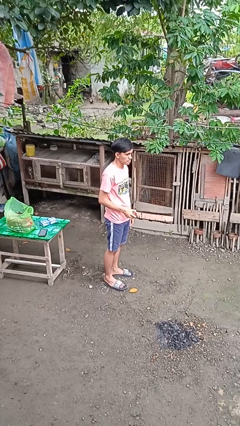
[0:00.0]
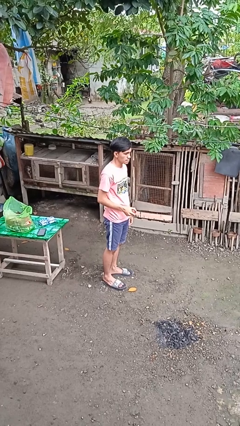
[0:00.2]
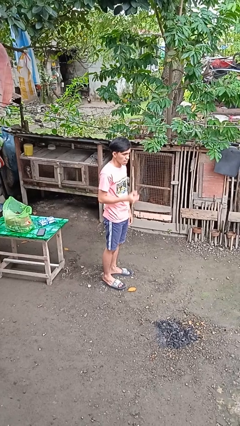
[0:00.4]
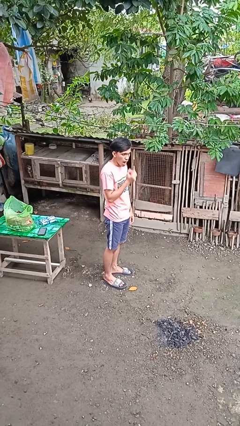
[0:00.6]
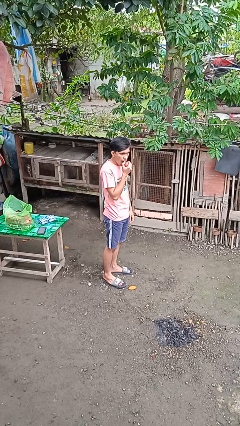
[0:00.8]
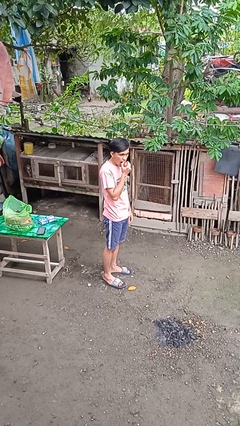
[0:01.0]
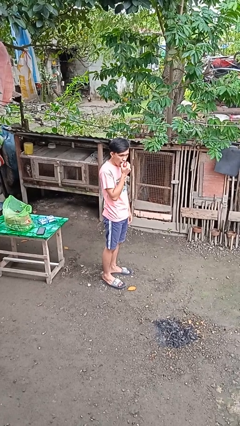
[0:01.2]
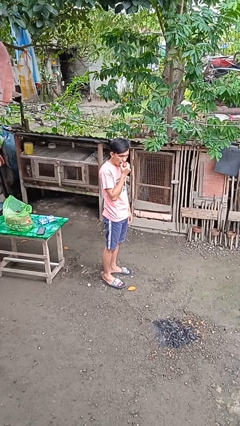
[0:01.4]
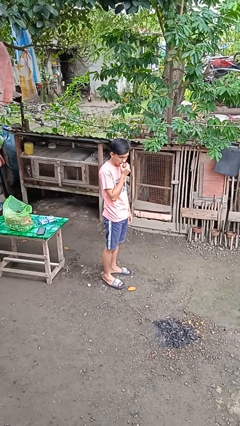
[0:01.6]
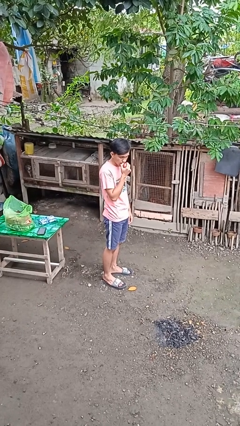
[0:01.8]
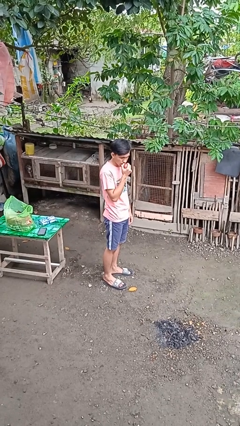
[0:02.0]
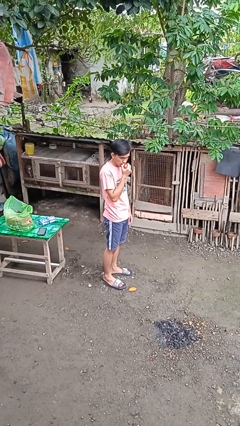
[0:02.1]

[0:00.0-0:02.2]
person eats apple

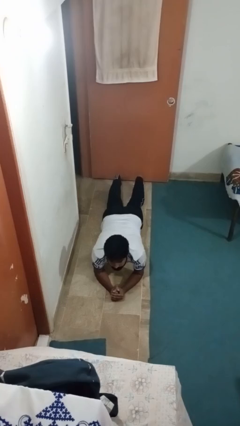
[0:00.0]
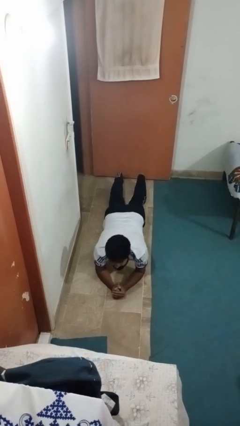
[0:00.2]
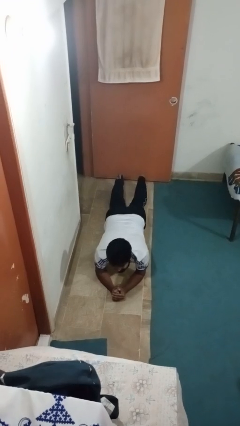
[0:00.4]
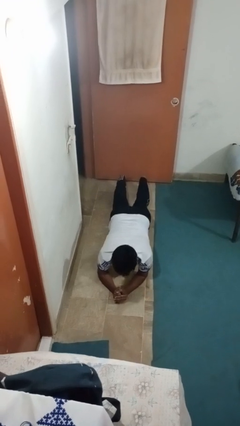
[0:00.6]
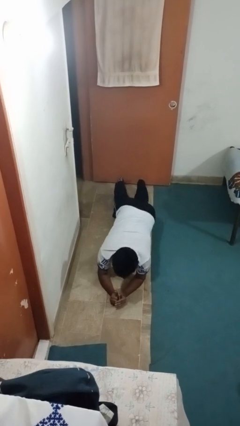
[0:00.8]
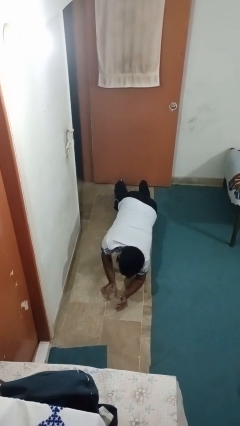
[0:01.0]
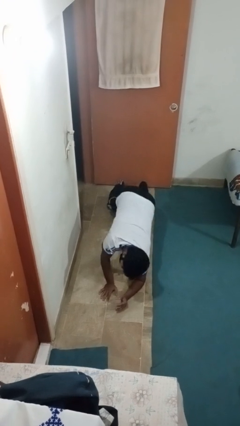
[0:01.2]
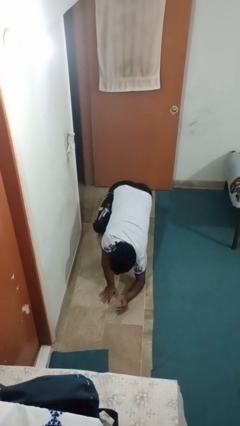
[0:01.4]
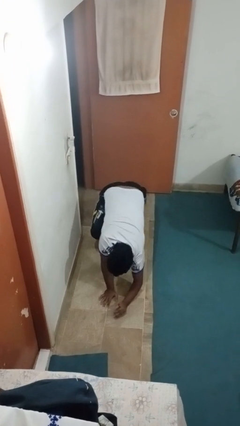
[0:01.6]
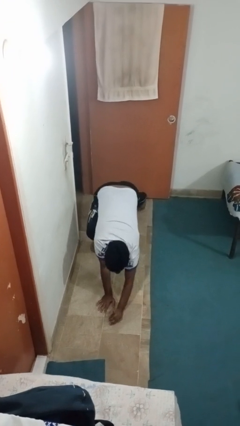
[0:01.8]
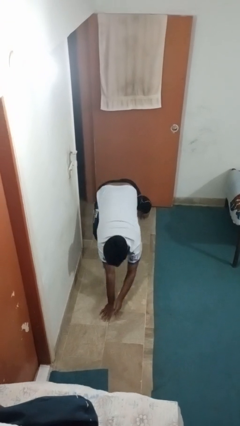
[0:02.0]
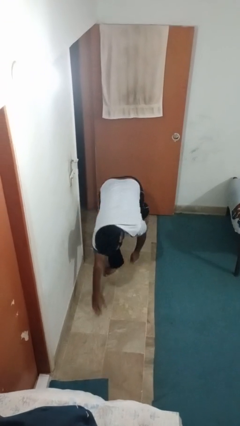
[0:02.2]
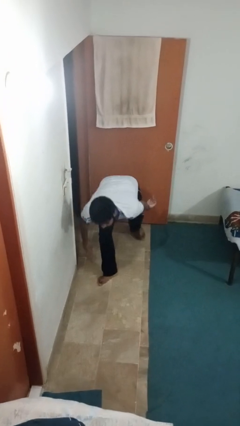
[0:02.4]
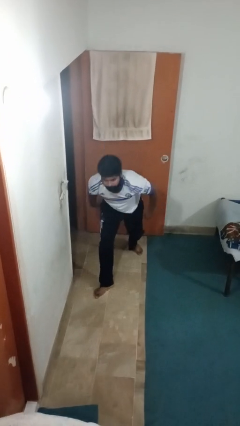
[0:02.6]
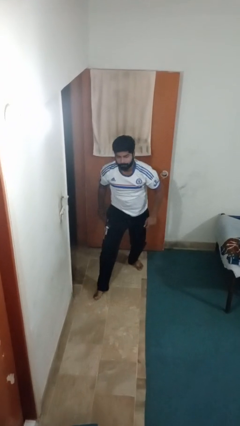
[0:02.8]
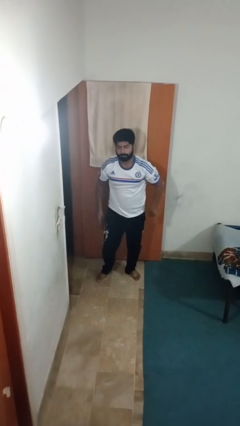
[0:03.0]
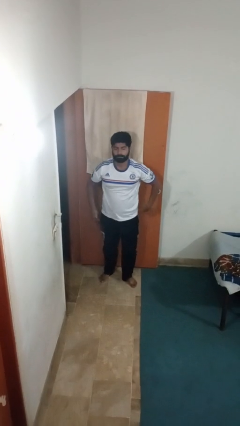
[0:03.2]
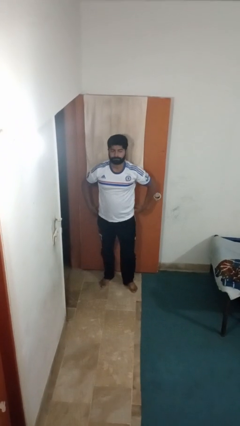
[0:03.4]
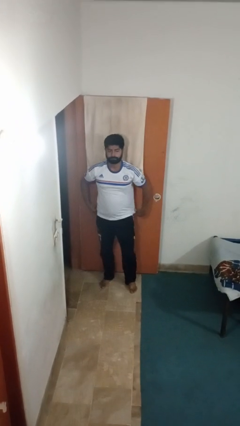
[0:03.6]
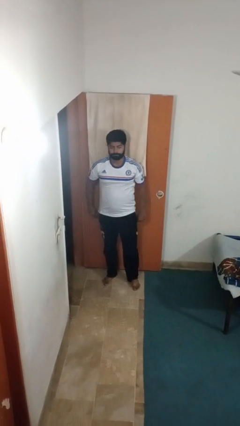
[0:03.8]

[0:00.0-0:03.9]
person stands up from floor

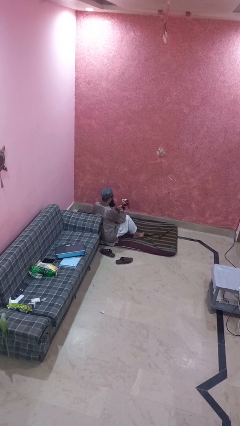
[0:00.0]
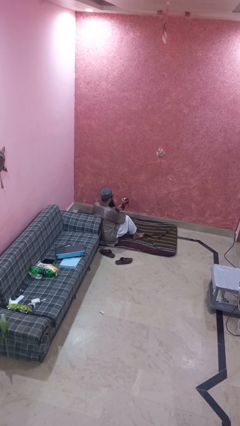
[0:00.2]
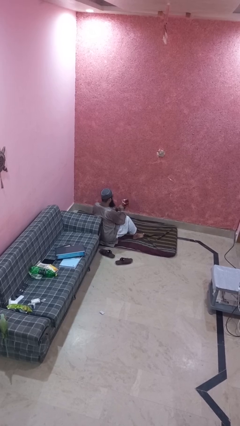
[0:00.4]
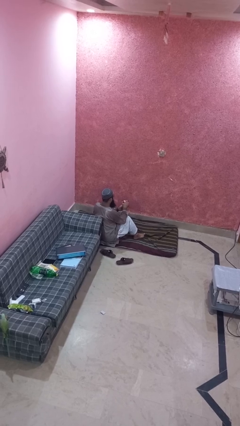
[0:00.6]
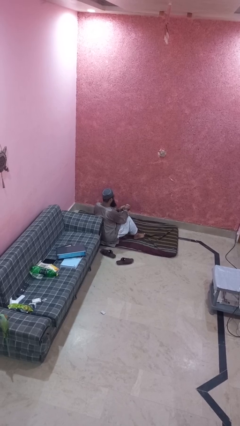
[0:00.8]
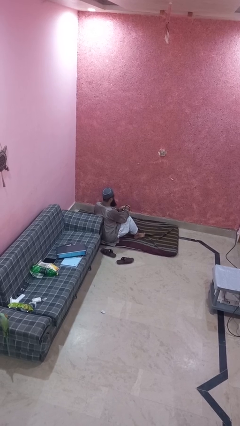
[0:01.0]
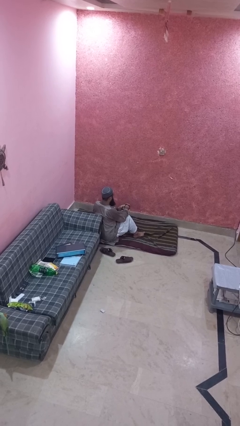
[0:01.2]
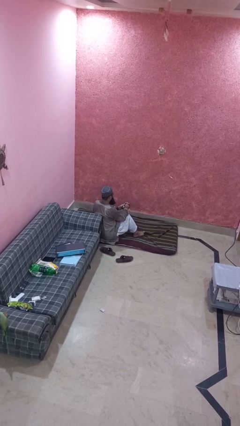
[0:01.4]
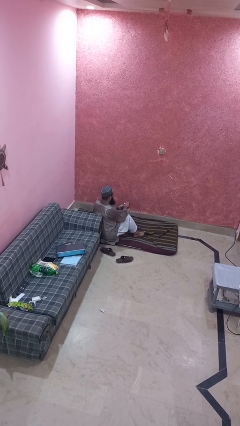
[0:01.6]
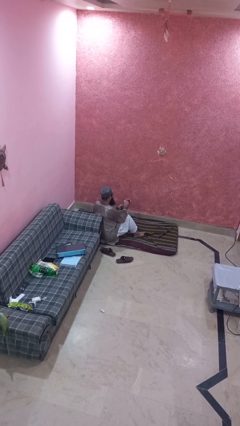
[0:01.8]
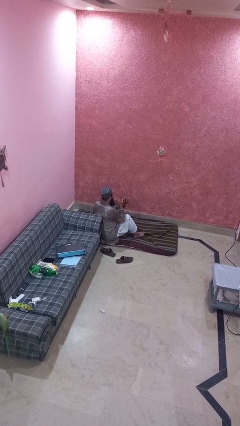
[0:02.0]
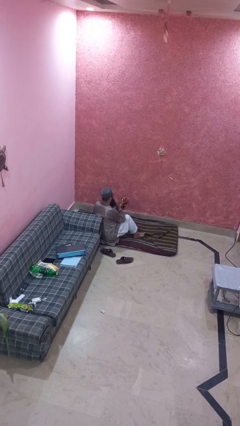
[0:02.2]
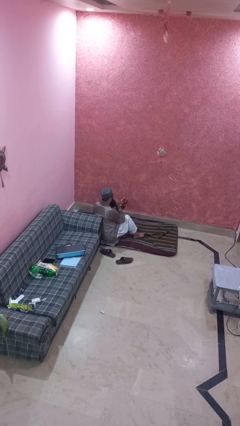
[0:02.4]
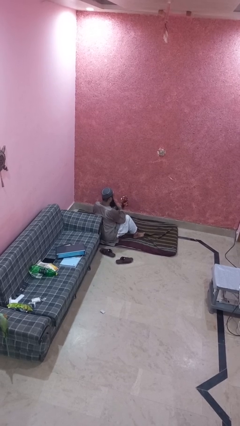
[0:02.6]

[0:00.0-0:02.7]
person eats snack from bag

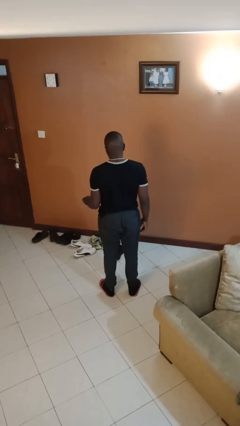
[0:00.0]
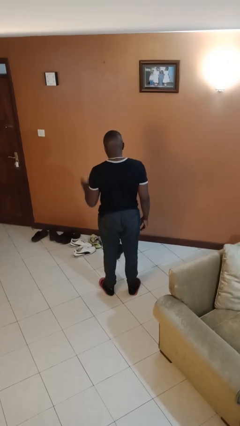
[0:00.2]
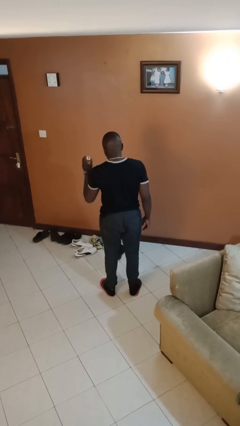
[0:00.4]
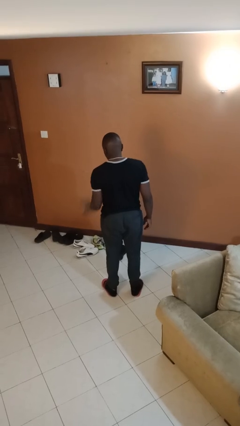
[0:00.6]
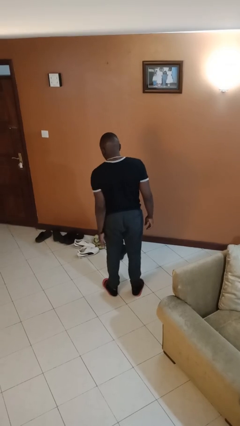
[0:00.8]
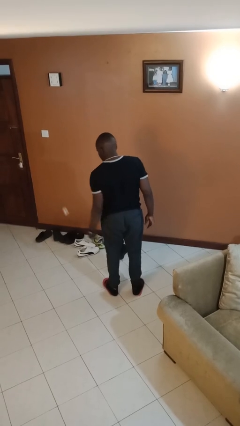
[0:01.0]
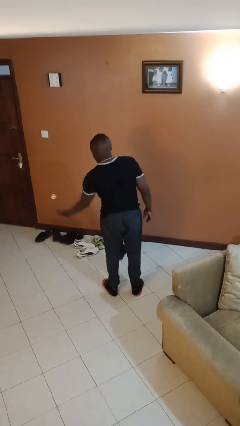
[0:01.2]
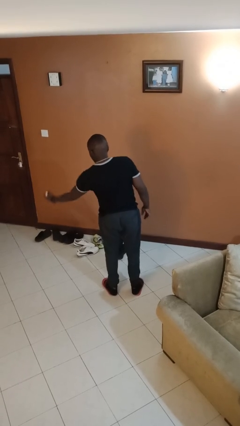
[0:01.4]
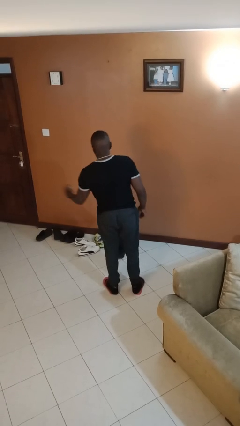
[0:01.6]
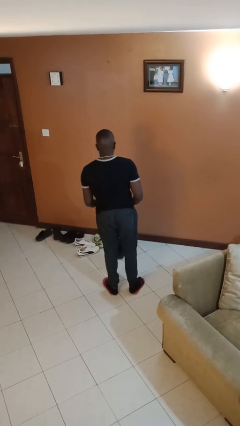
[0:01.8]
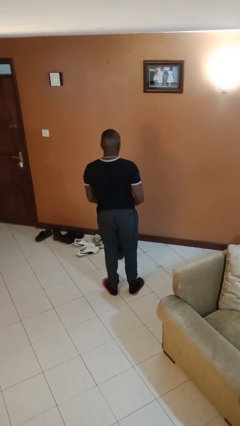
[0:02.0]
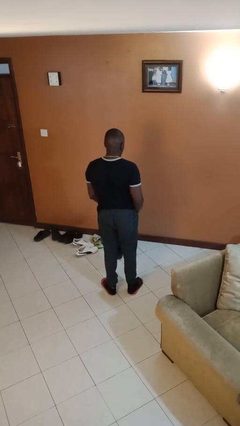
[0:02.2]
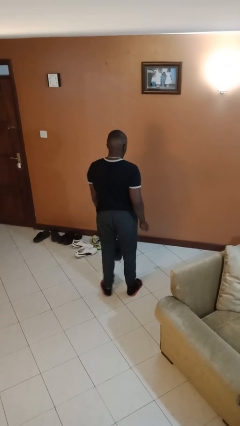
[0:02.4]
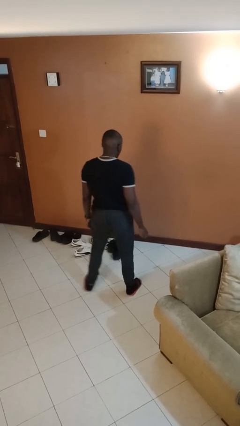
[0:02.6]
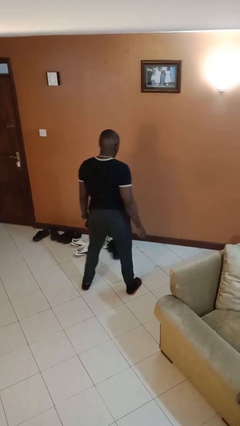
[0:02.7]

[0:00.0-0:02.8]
person bounces ball on floor

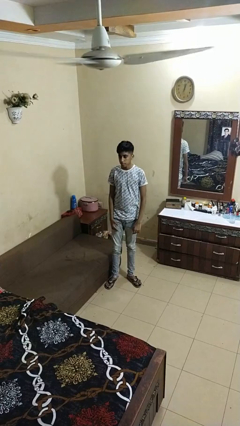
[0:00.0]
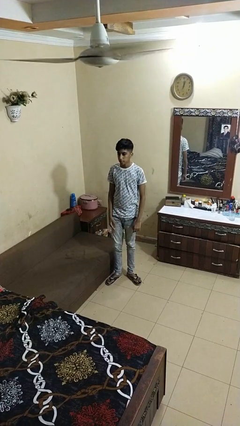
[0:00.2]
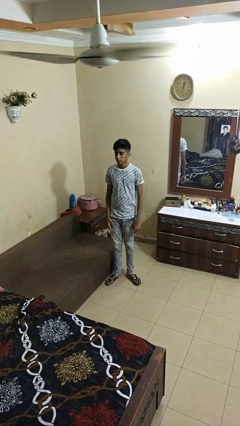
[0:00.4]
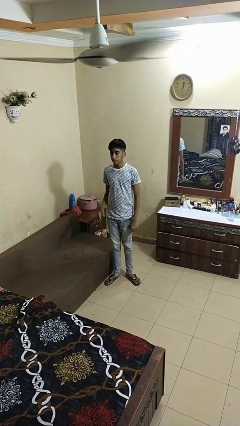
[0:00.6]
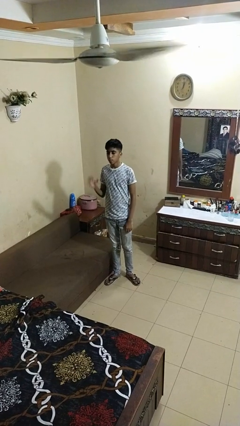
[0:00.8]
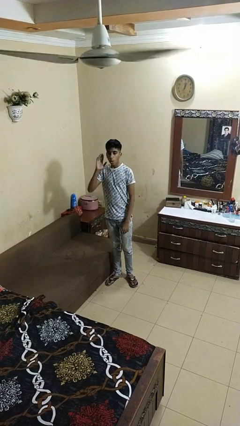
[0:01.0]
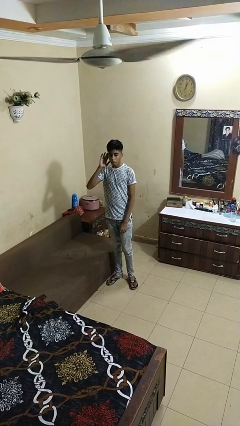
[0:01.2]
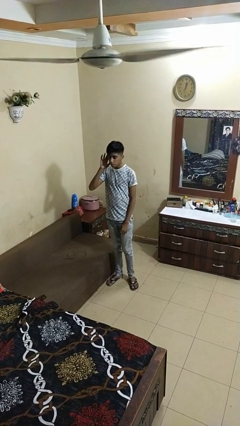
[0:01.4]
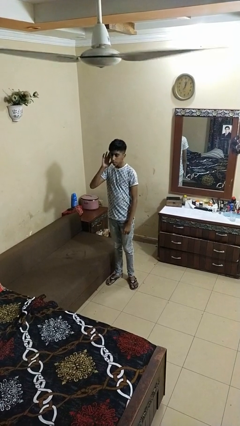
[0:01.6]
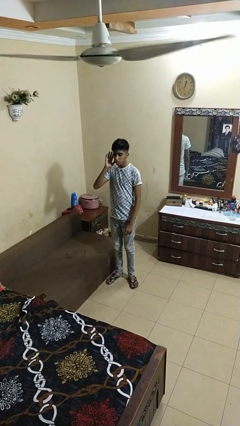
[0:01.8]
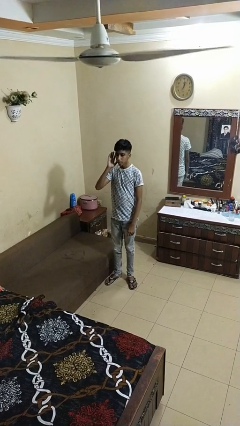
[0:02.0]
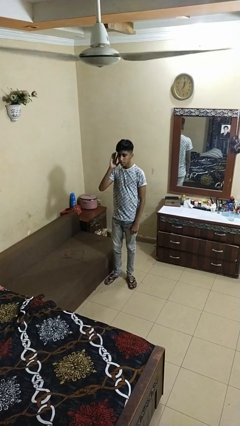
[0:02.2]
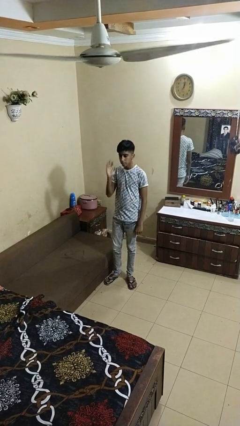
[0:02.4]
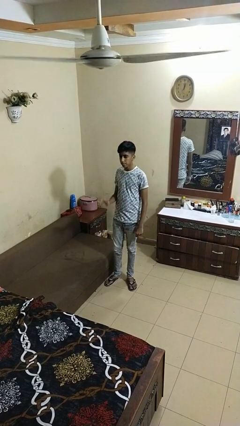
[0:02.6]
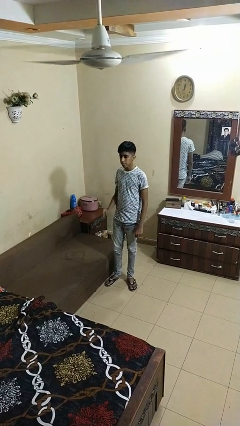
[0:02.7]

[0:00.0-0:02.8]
person gestures listen closely

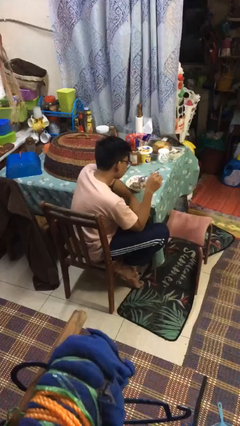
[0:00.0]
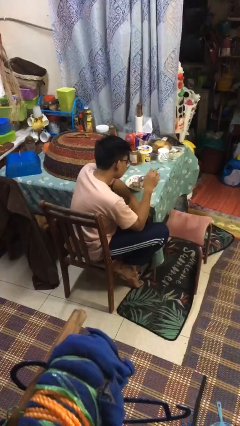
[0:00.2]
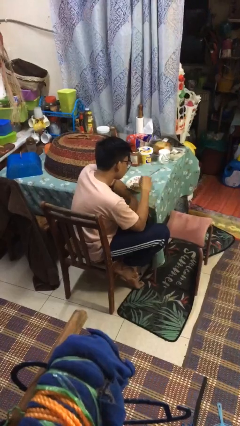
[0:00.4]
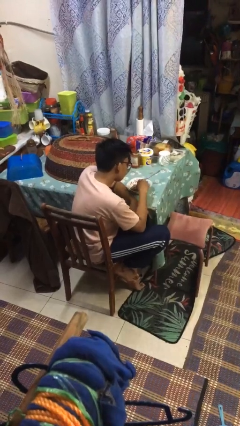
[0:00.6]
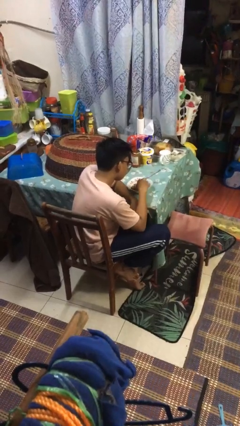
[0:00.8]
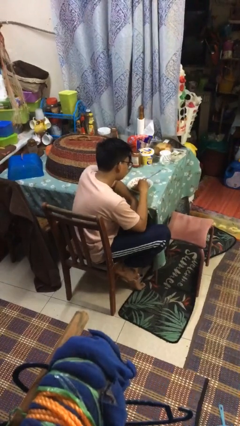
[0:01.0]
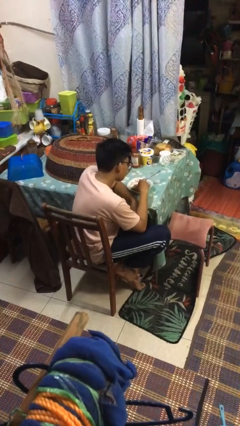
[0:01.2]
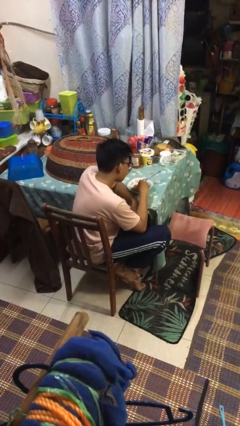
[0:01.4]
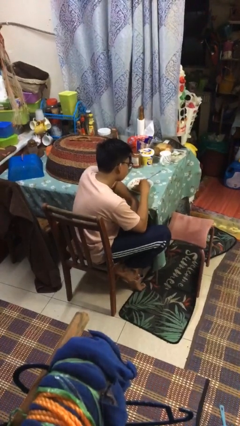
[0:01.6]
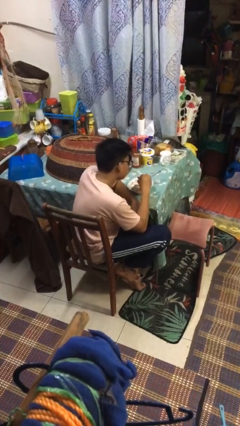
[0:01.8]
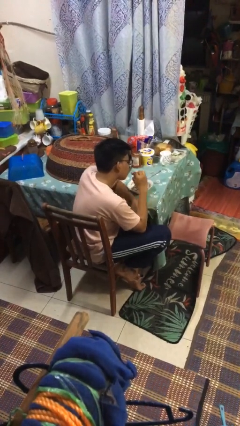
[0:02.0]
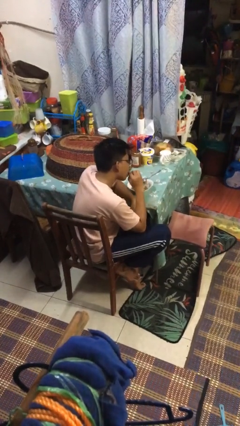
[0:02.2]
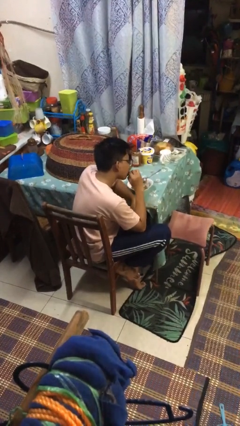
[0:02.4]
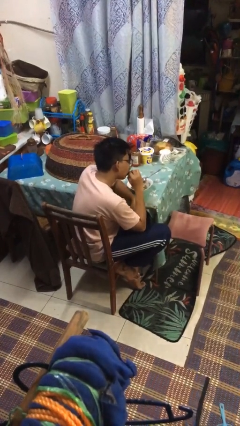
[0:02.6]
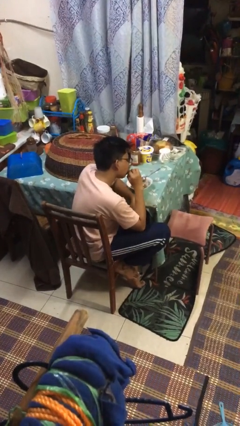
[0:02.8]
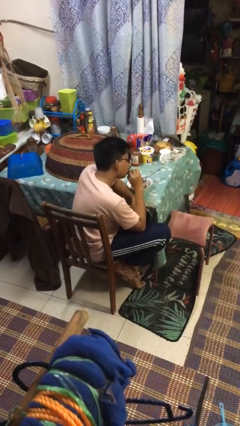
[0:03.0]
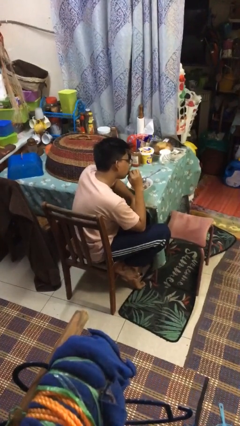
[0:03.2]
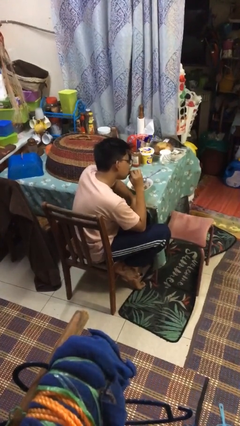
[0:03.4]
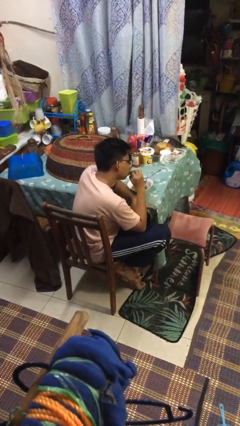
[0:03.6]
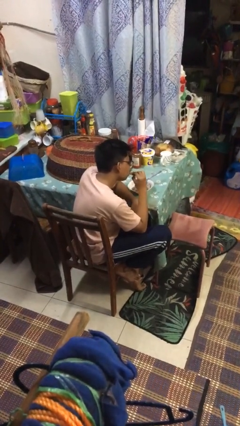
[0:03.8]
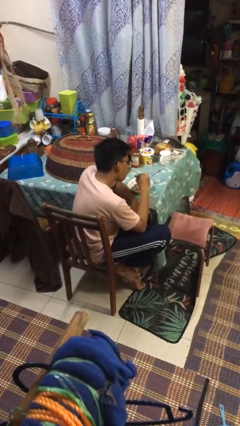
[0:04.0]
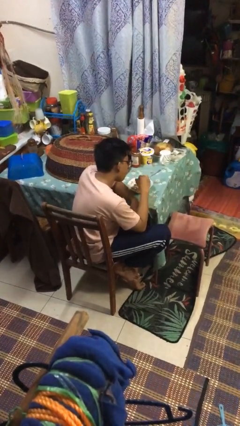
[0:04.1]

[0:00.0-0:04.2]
person eats with hands
